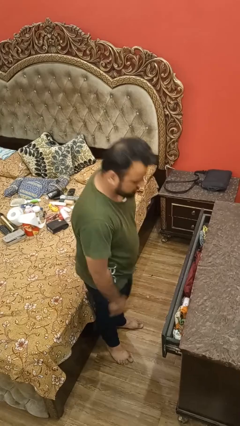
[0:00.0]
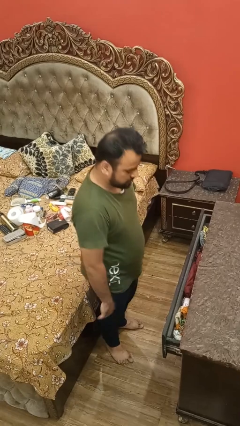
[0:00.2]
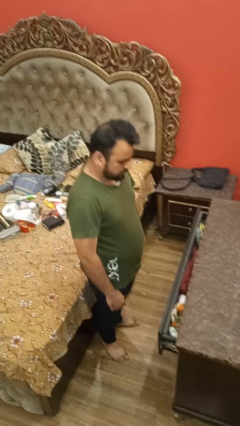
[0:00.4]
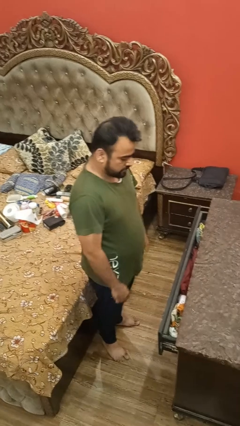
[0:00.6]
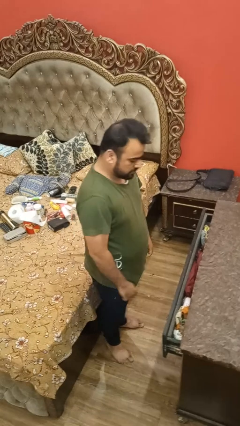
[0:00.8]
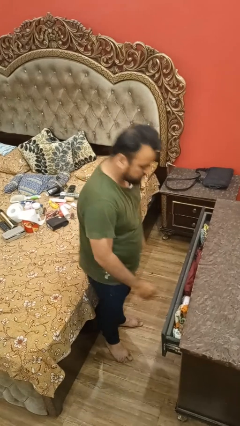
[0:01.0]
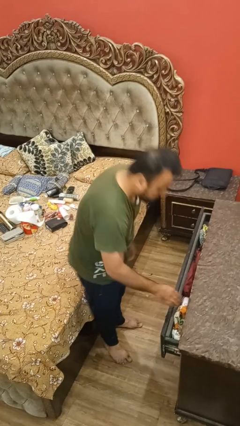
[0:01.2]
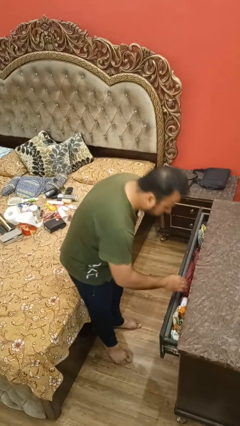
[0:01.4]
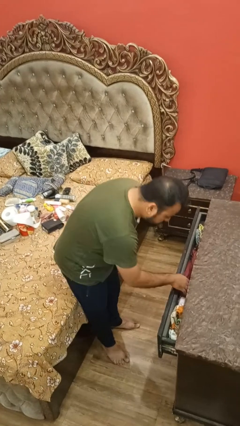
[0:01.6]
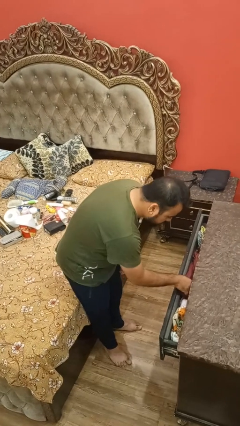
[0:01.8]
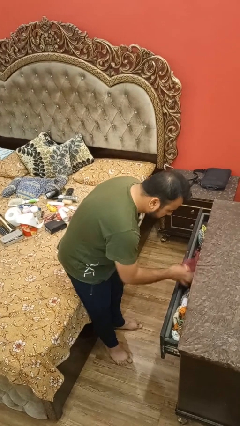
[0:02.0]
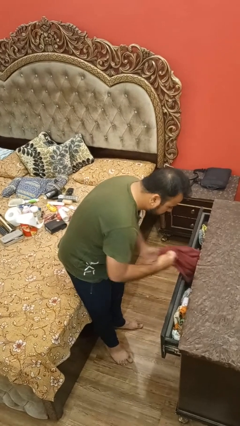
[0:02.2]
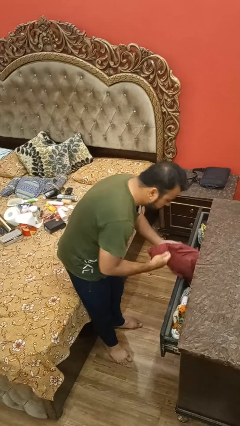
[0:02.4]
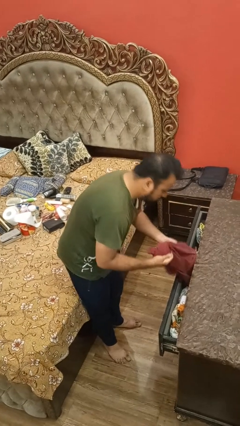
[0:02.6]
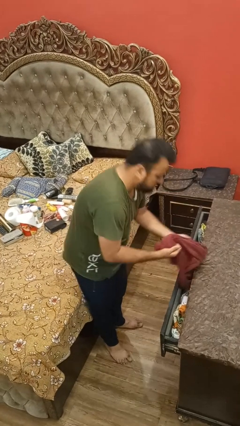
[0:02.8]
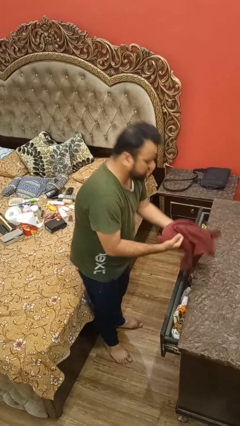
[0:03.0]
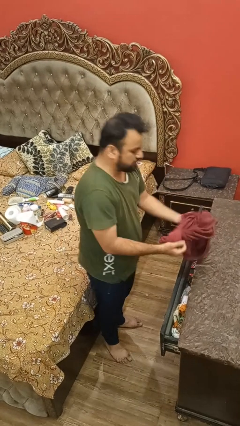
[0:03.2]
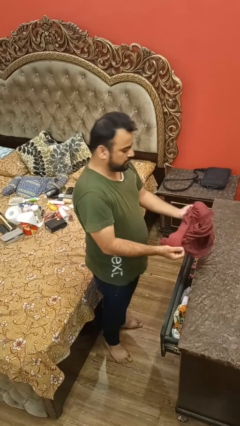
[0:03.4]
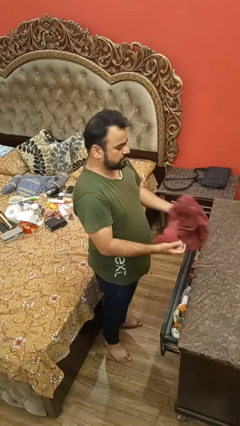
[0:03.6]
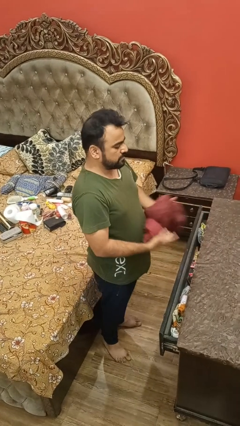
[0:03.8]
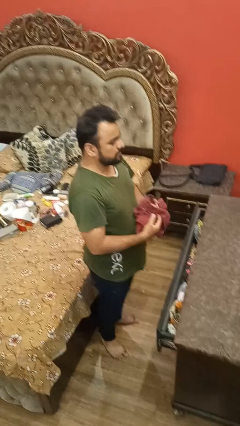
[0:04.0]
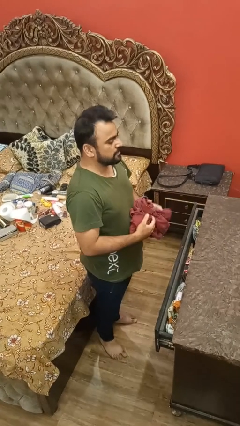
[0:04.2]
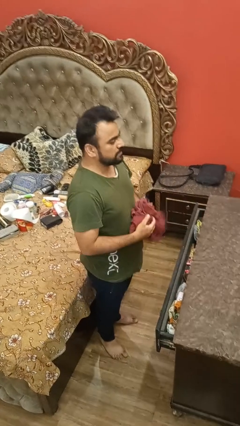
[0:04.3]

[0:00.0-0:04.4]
person takes clothes from dresser

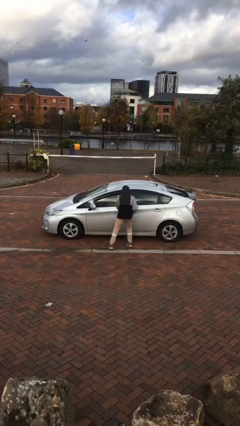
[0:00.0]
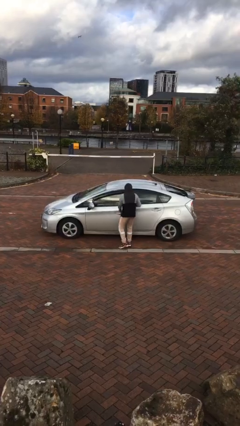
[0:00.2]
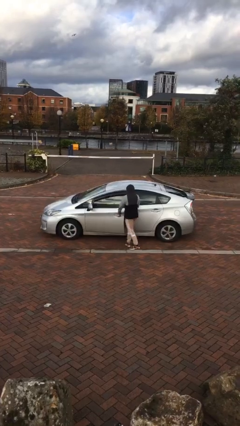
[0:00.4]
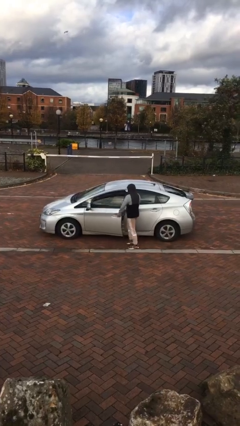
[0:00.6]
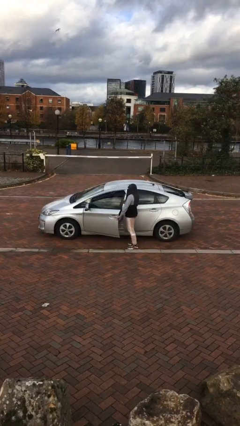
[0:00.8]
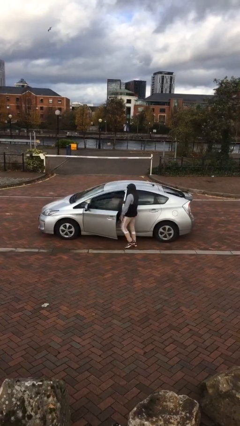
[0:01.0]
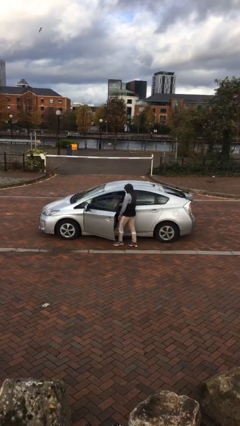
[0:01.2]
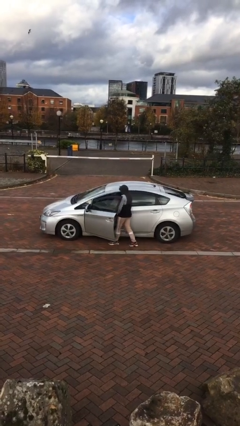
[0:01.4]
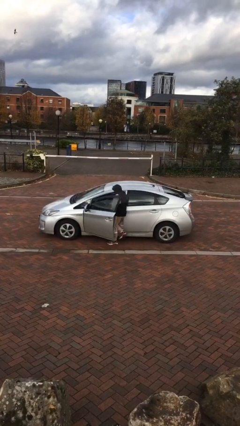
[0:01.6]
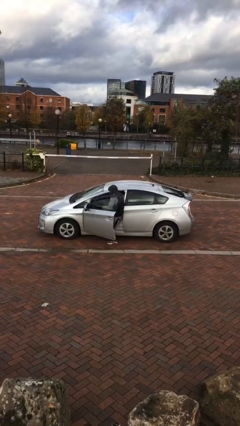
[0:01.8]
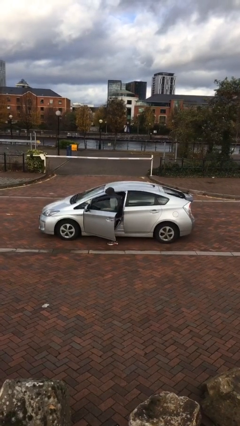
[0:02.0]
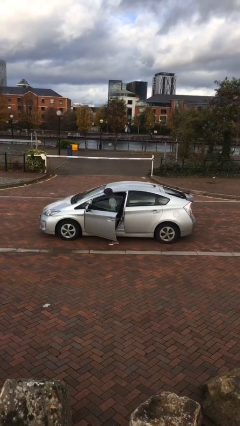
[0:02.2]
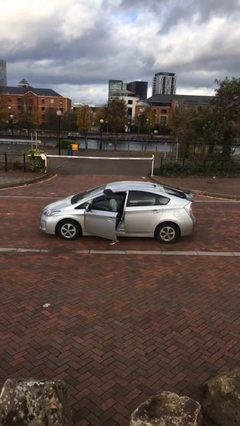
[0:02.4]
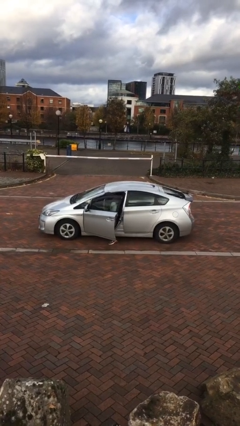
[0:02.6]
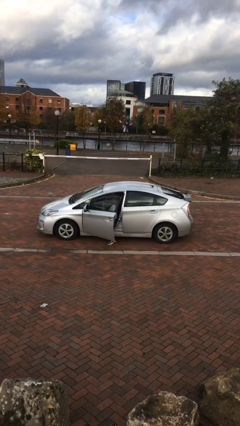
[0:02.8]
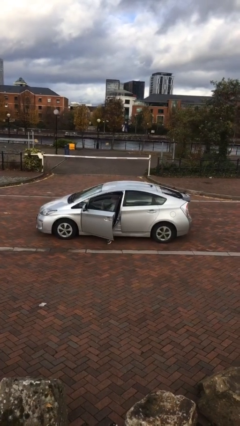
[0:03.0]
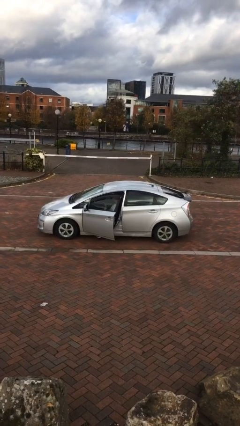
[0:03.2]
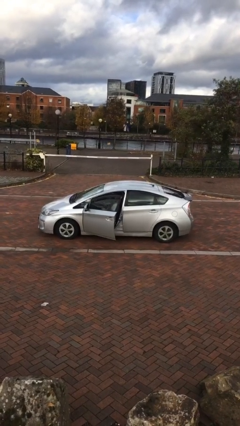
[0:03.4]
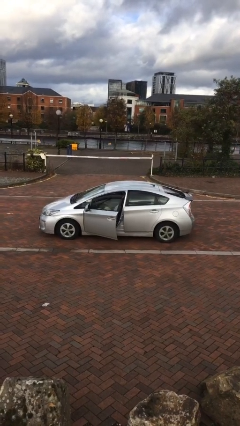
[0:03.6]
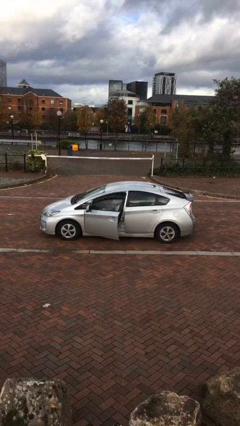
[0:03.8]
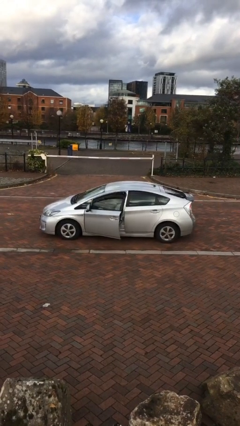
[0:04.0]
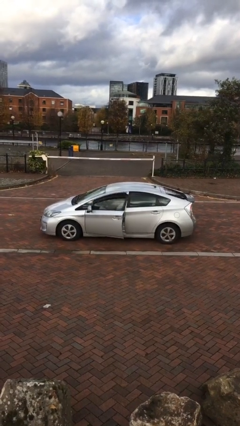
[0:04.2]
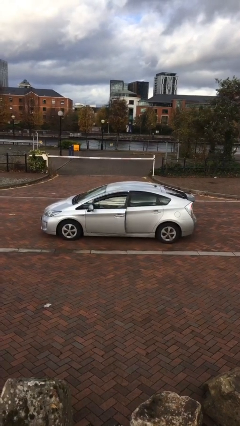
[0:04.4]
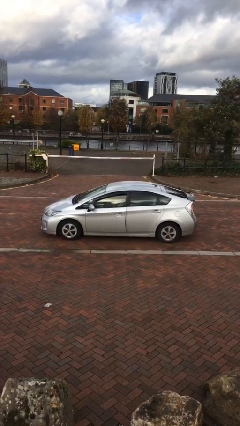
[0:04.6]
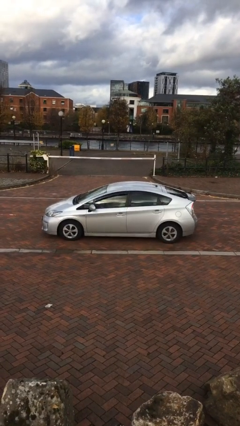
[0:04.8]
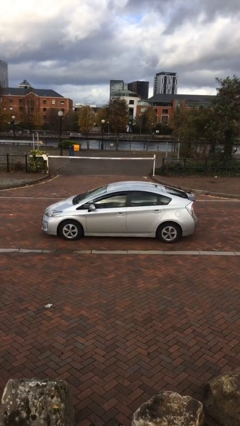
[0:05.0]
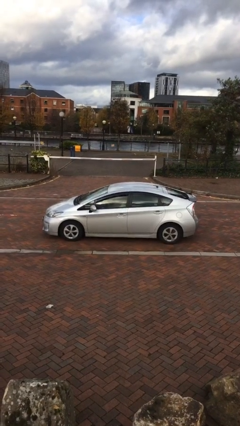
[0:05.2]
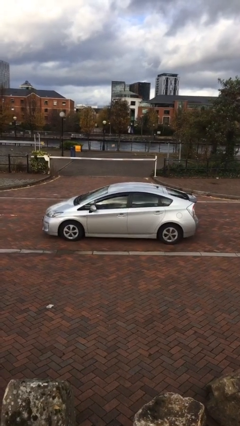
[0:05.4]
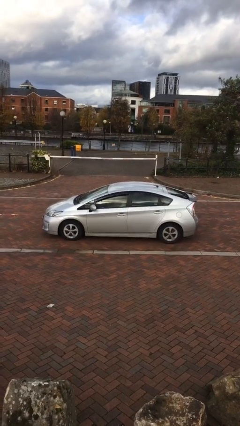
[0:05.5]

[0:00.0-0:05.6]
car picks up person

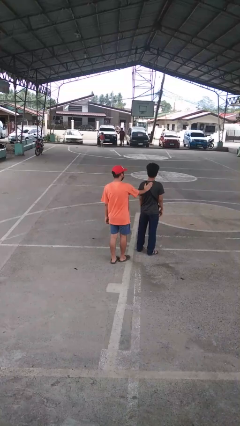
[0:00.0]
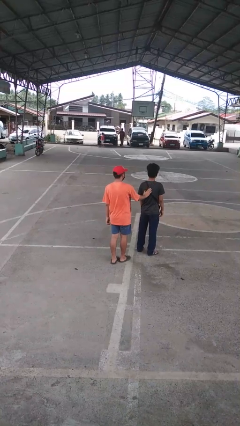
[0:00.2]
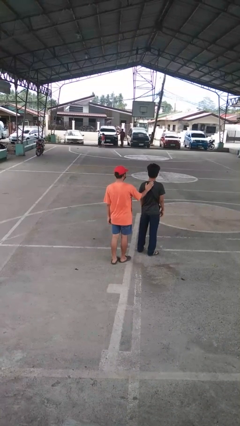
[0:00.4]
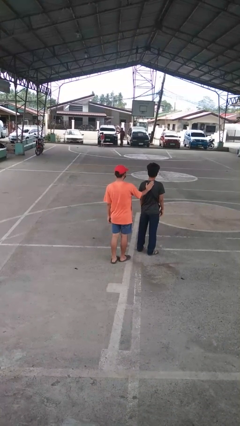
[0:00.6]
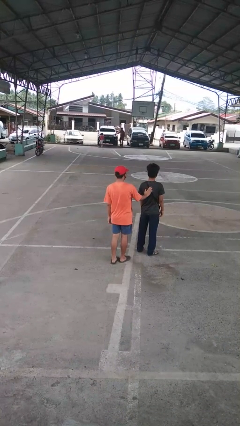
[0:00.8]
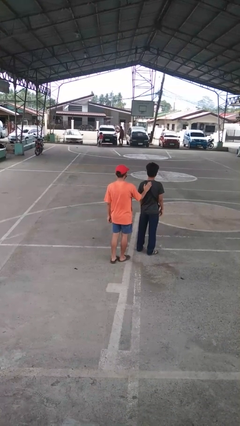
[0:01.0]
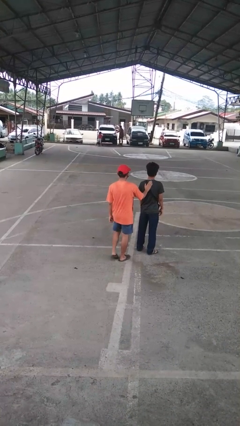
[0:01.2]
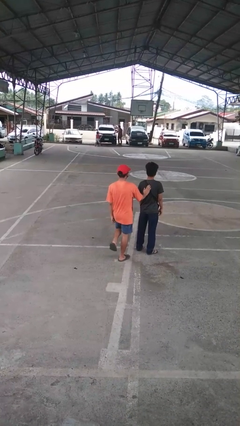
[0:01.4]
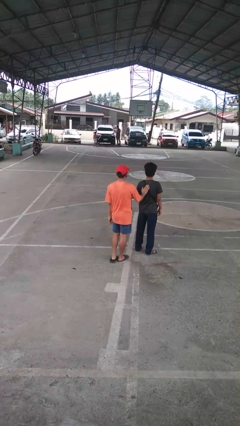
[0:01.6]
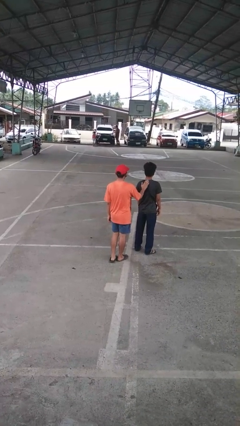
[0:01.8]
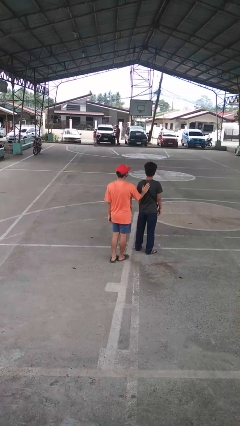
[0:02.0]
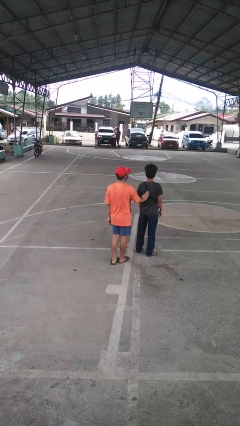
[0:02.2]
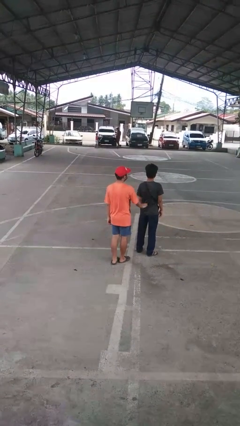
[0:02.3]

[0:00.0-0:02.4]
person touches back of person

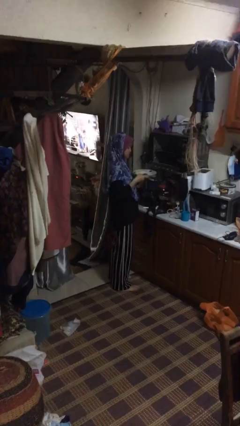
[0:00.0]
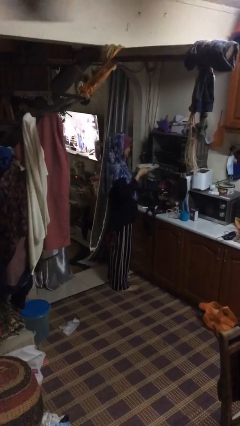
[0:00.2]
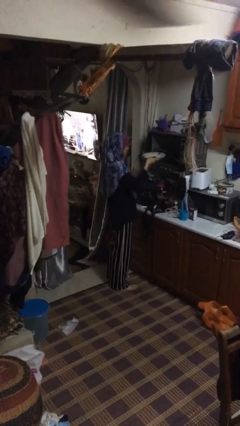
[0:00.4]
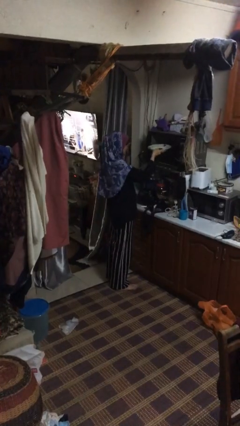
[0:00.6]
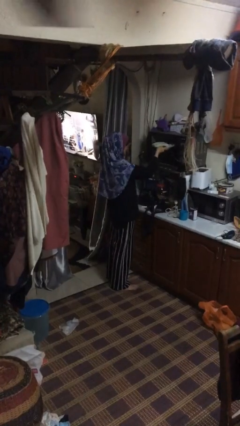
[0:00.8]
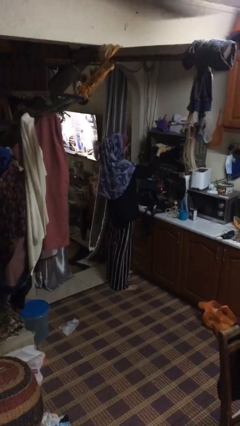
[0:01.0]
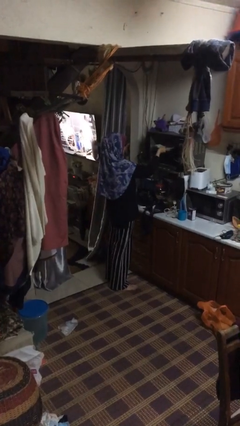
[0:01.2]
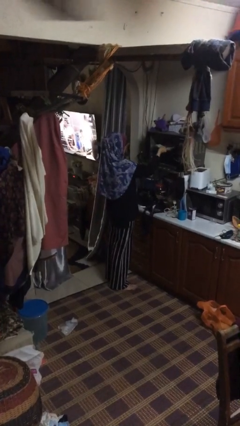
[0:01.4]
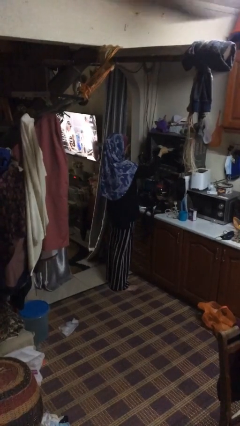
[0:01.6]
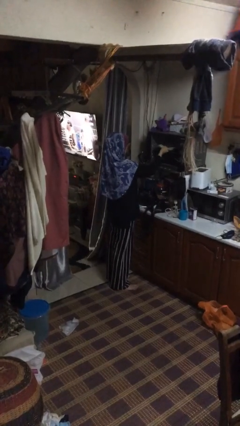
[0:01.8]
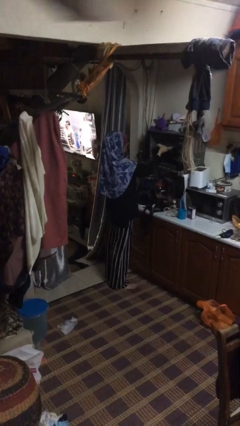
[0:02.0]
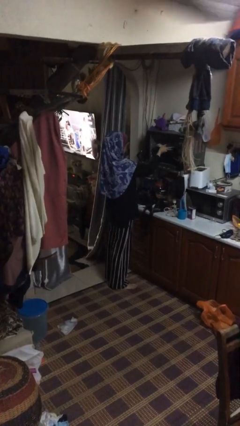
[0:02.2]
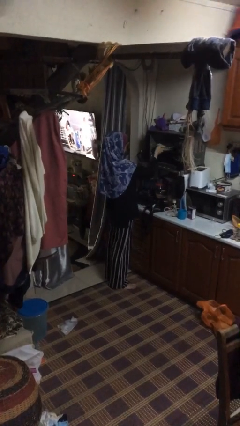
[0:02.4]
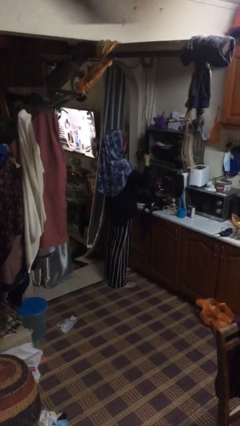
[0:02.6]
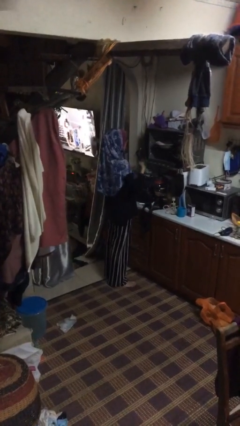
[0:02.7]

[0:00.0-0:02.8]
person puts object into oven

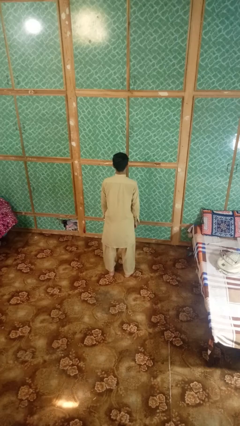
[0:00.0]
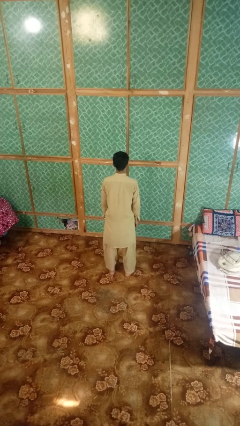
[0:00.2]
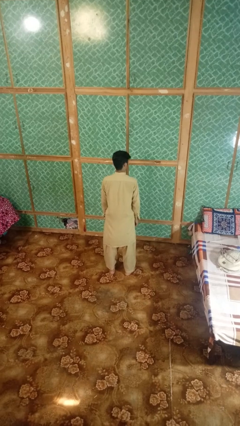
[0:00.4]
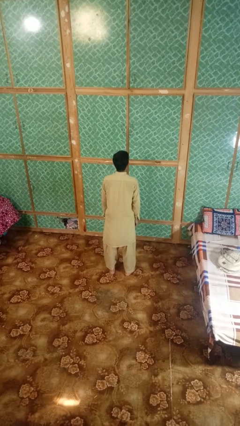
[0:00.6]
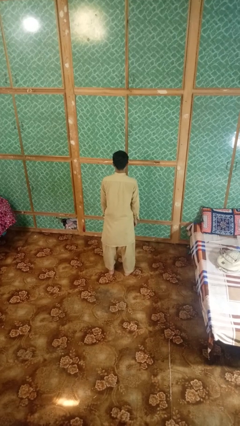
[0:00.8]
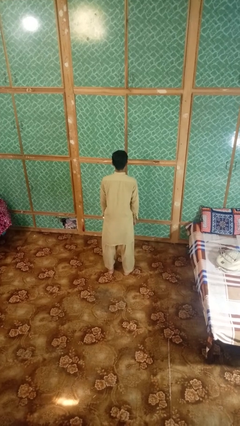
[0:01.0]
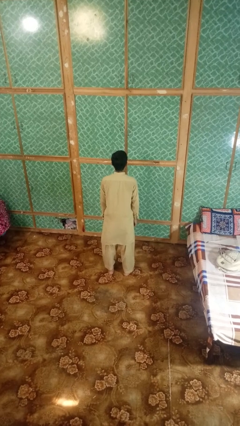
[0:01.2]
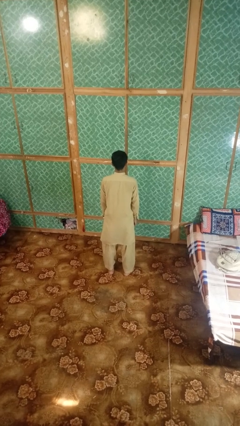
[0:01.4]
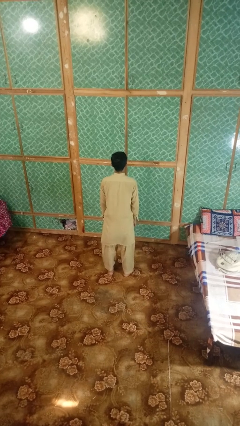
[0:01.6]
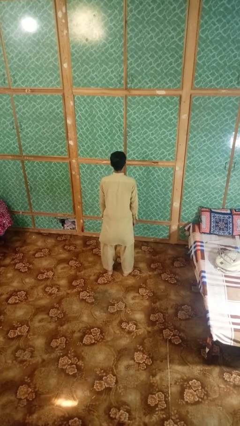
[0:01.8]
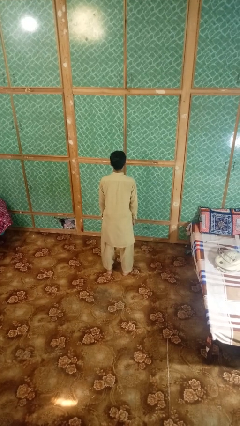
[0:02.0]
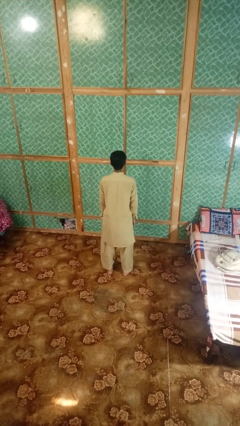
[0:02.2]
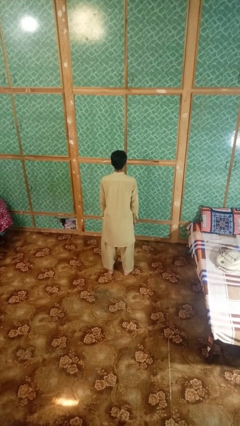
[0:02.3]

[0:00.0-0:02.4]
person shakes head

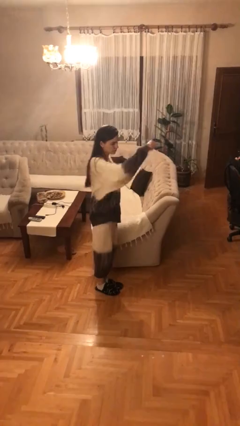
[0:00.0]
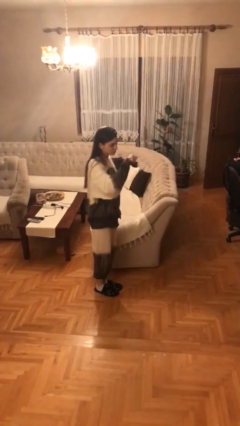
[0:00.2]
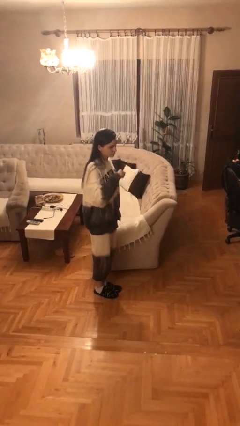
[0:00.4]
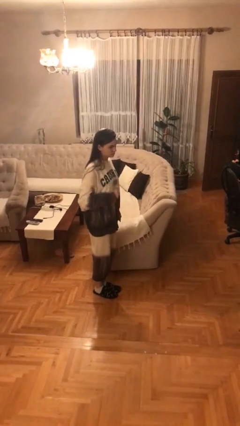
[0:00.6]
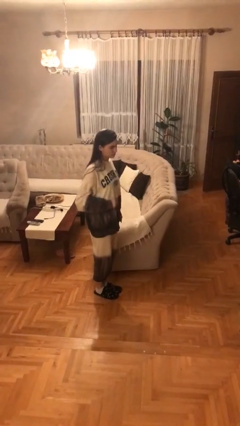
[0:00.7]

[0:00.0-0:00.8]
person punches
